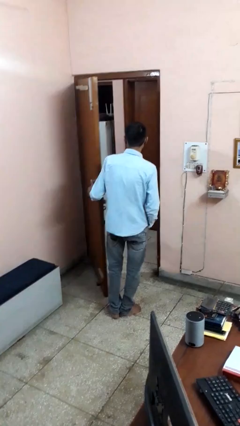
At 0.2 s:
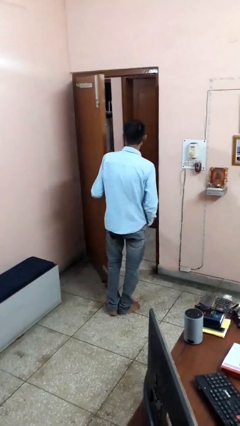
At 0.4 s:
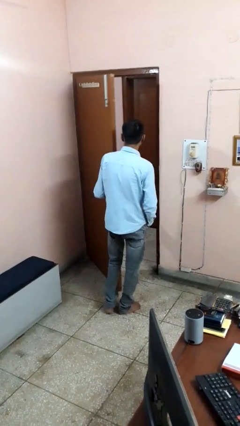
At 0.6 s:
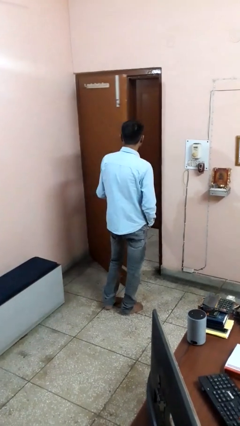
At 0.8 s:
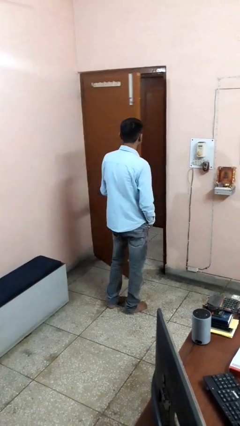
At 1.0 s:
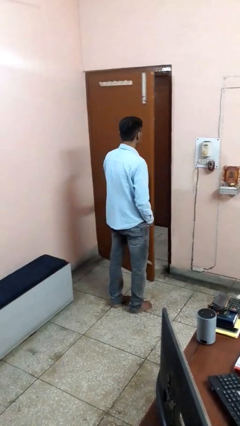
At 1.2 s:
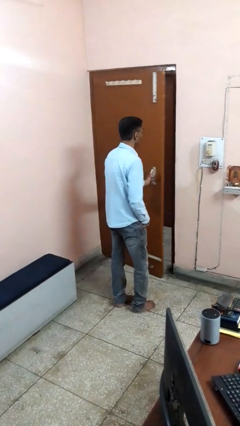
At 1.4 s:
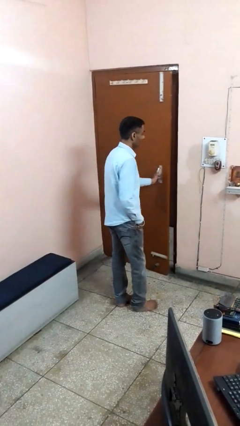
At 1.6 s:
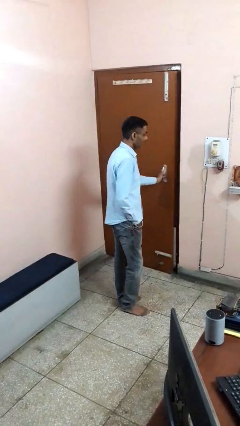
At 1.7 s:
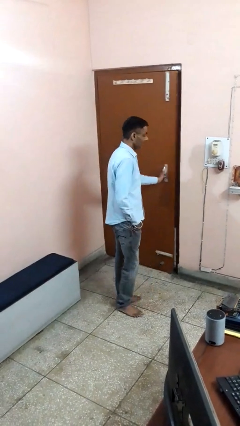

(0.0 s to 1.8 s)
person closes facility door

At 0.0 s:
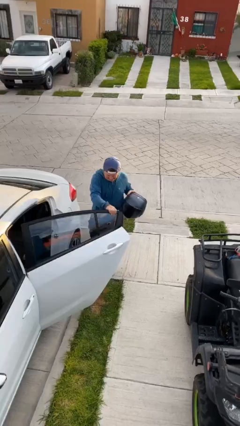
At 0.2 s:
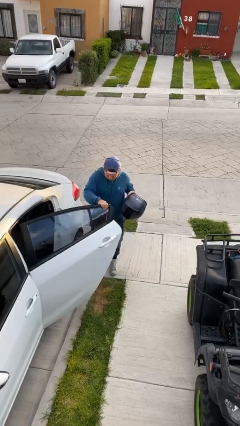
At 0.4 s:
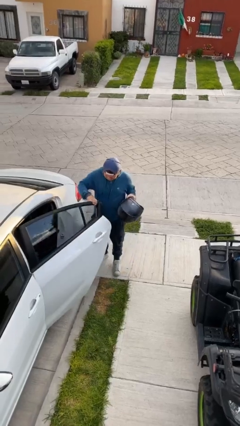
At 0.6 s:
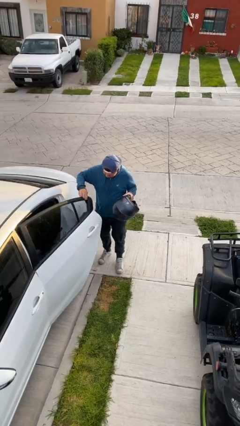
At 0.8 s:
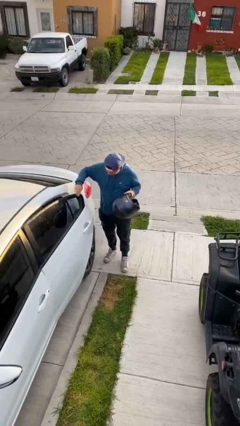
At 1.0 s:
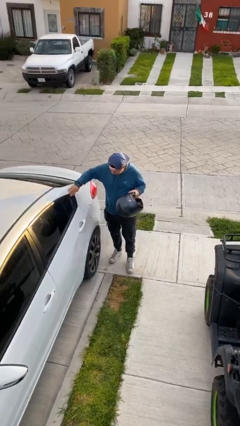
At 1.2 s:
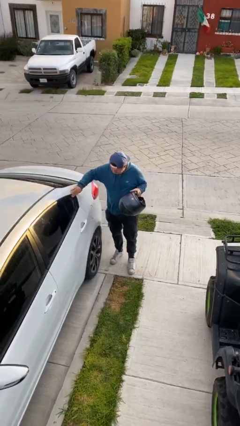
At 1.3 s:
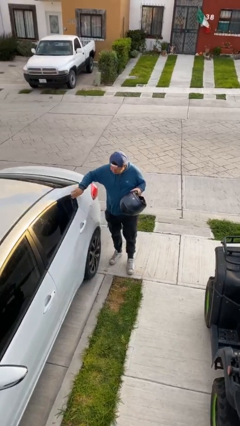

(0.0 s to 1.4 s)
person closes car door

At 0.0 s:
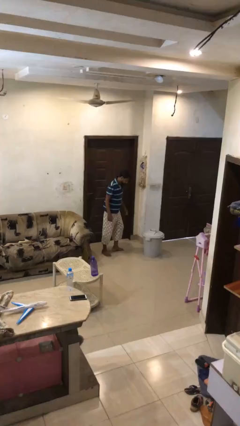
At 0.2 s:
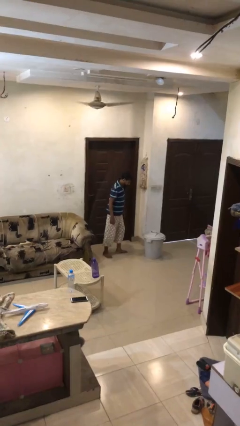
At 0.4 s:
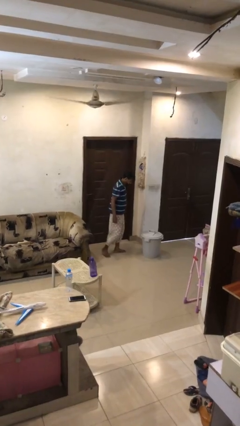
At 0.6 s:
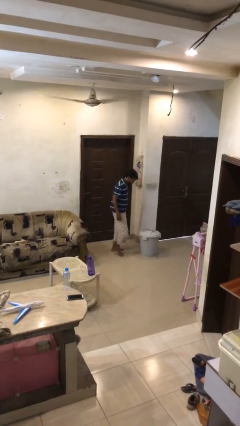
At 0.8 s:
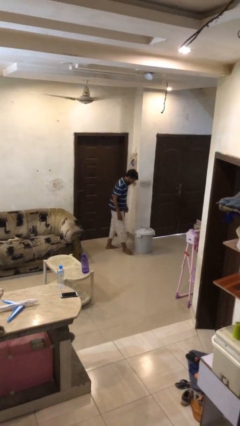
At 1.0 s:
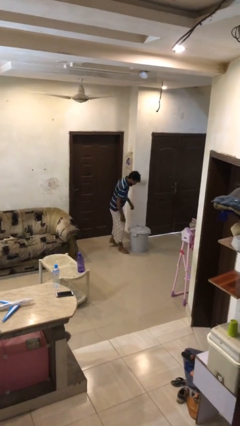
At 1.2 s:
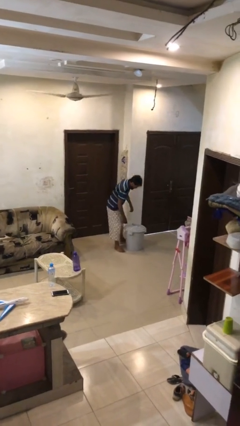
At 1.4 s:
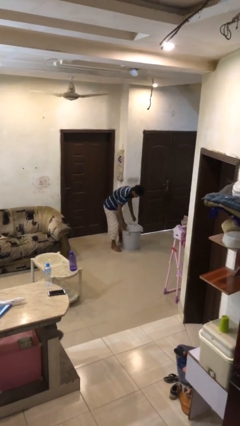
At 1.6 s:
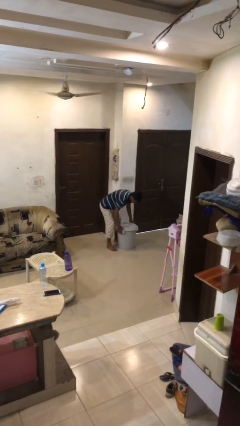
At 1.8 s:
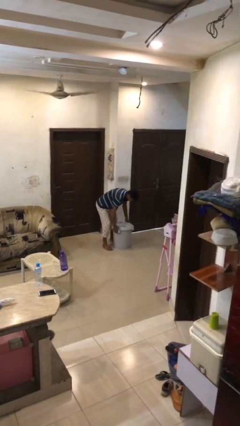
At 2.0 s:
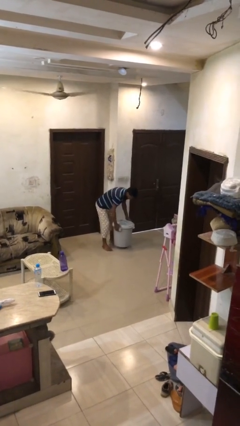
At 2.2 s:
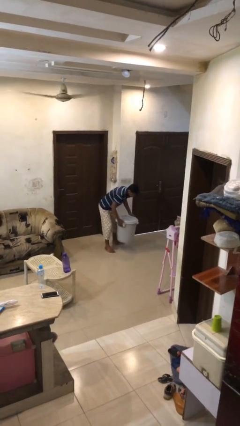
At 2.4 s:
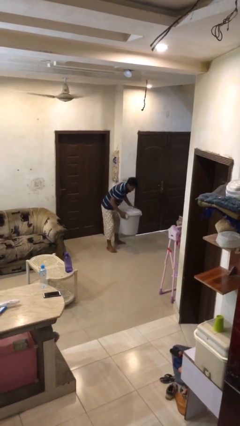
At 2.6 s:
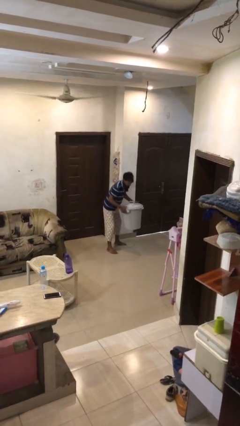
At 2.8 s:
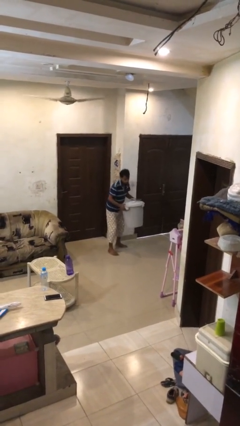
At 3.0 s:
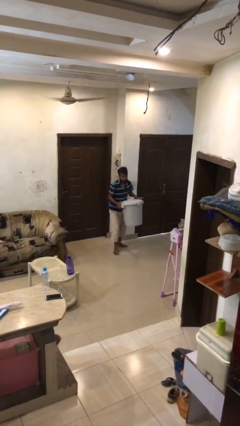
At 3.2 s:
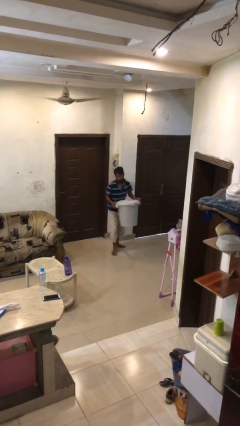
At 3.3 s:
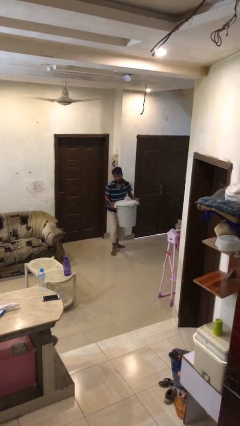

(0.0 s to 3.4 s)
person picks up object from floor

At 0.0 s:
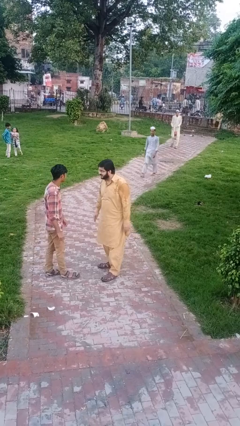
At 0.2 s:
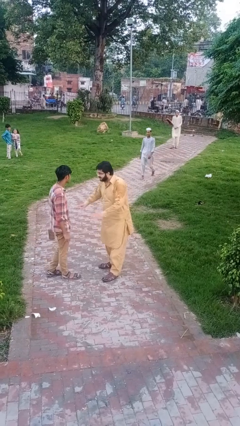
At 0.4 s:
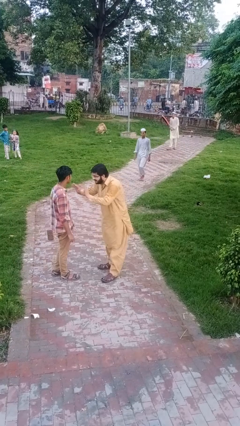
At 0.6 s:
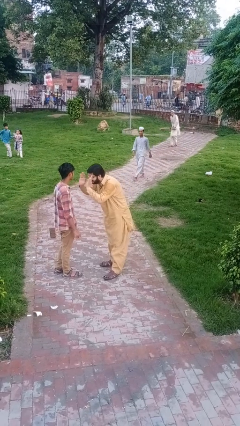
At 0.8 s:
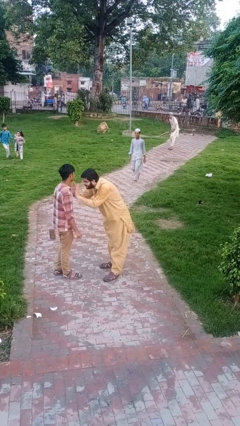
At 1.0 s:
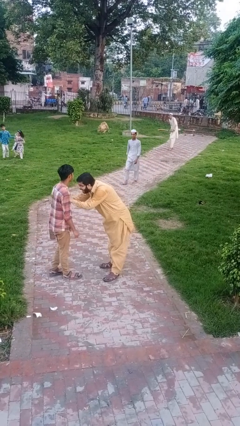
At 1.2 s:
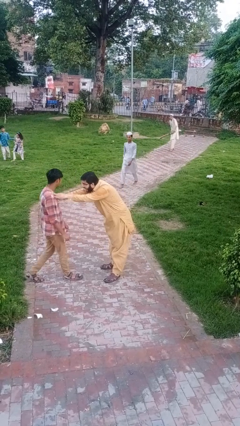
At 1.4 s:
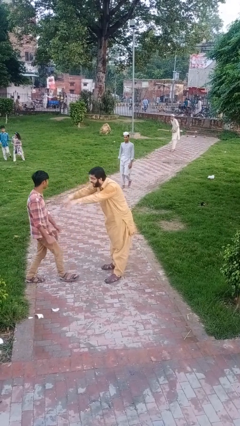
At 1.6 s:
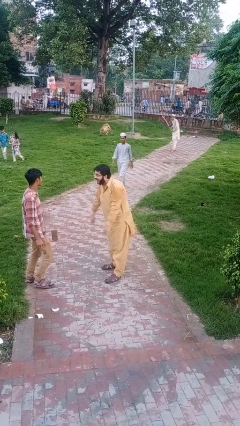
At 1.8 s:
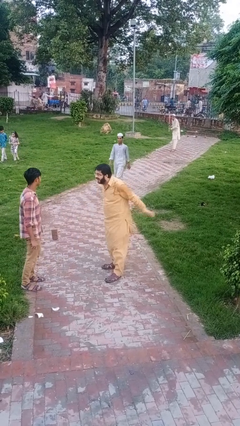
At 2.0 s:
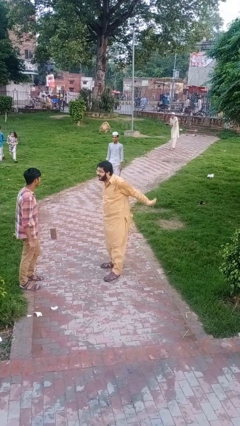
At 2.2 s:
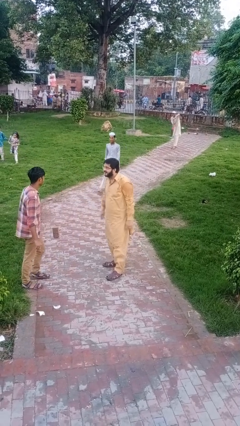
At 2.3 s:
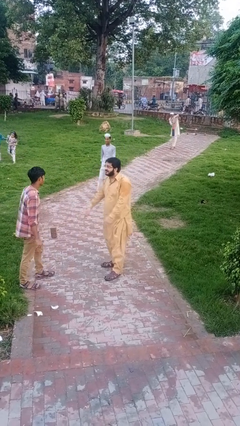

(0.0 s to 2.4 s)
person shoves person

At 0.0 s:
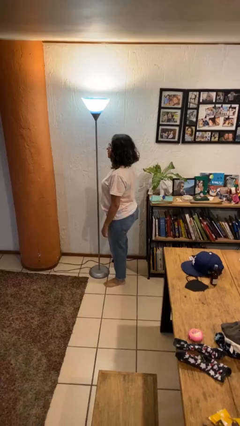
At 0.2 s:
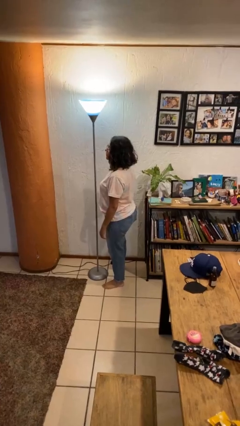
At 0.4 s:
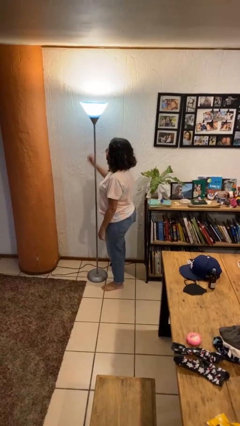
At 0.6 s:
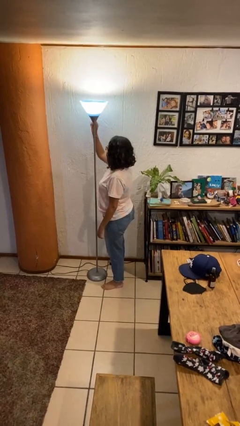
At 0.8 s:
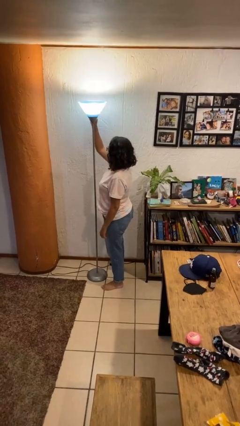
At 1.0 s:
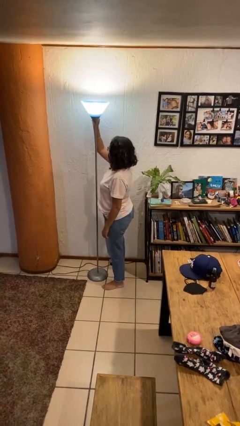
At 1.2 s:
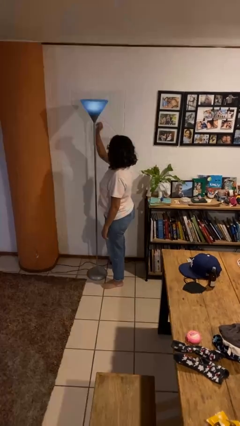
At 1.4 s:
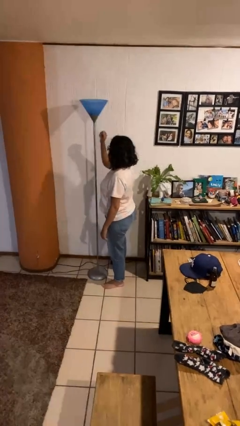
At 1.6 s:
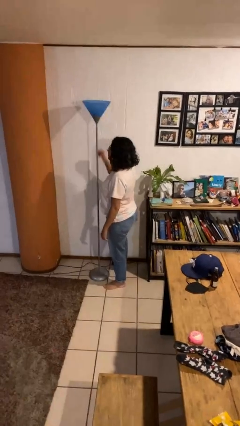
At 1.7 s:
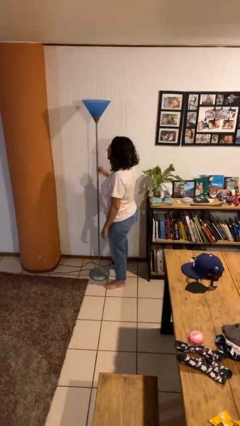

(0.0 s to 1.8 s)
person turns off lamp

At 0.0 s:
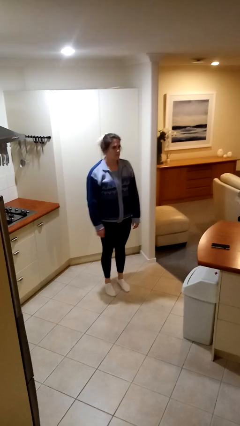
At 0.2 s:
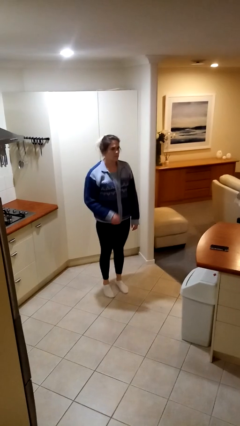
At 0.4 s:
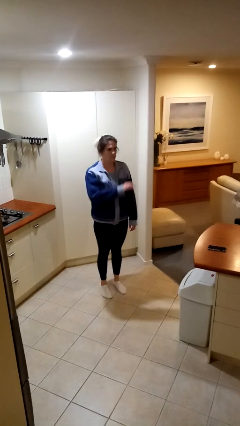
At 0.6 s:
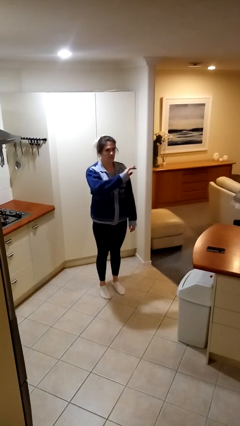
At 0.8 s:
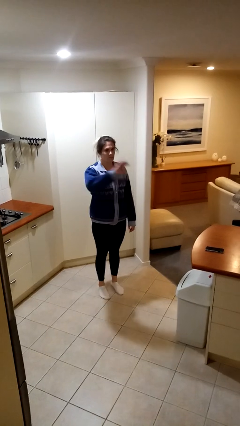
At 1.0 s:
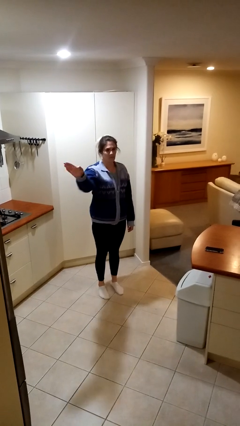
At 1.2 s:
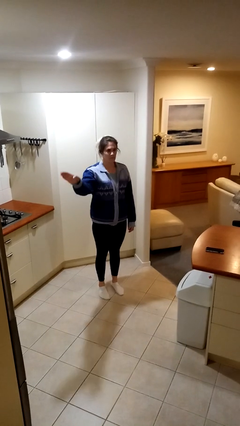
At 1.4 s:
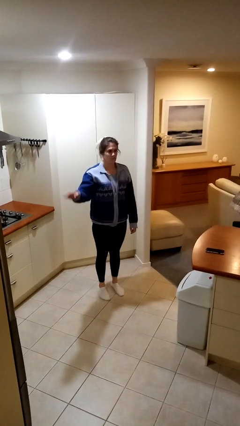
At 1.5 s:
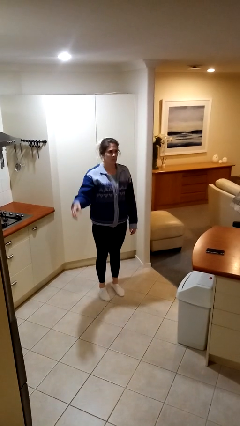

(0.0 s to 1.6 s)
person gestures swipe right

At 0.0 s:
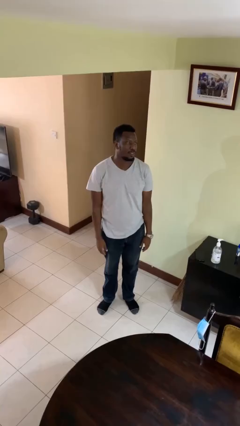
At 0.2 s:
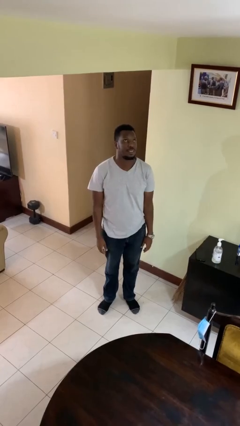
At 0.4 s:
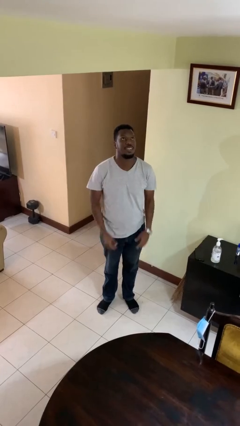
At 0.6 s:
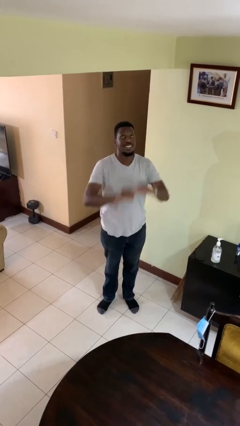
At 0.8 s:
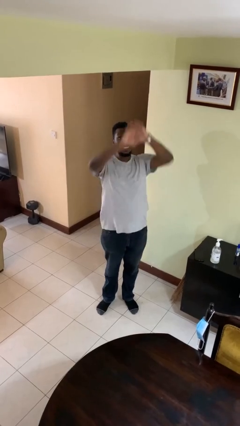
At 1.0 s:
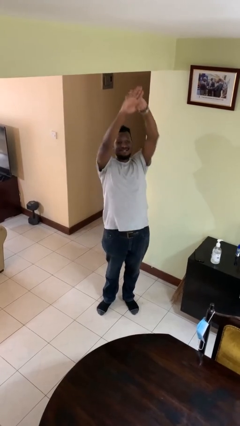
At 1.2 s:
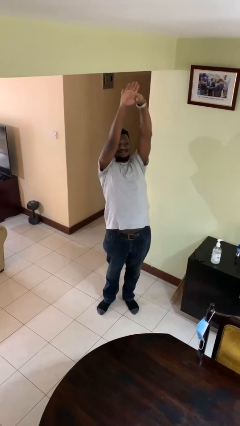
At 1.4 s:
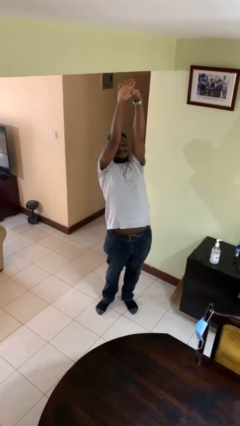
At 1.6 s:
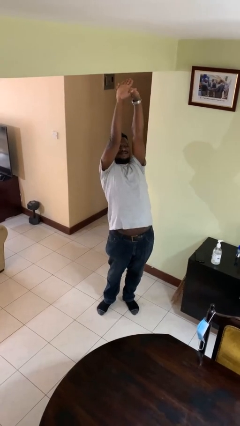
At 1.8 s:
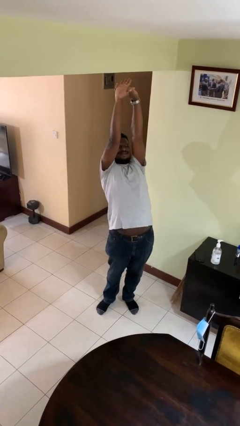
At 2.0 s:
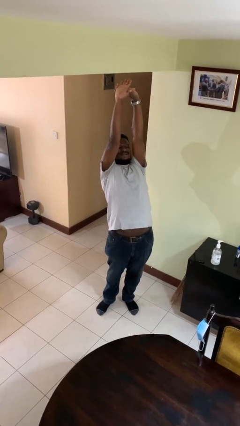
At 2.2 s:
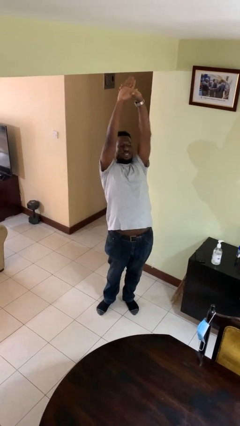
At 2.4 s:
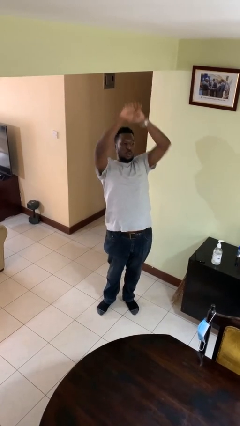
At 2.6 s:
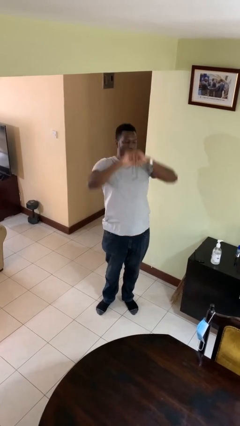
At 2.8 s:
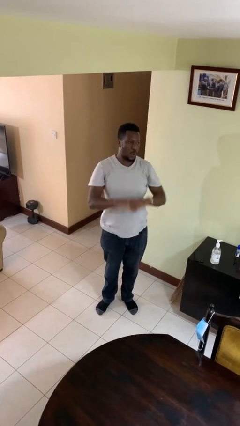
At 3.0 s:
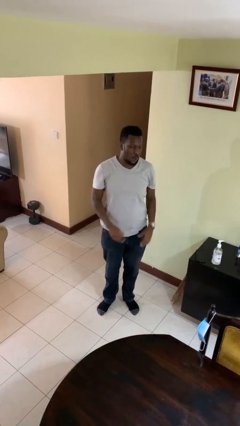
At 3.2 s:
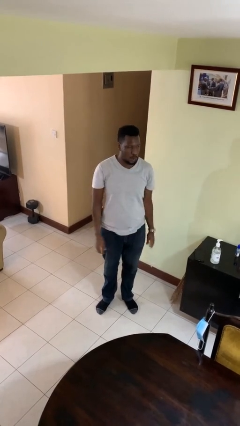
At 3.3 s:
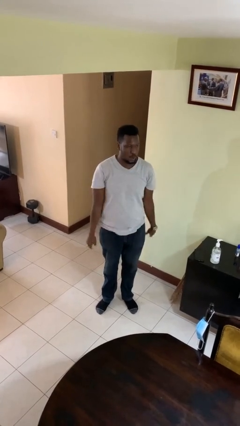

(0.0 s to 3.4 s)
person stretches arms over head

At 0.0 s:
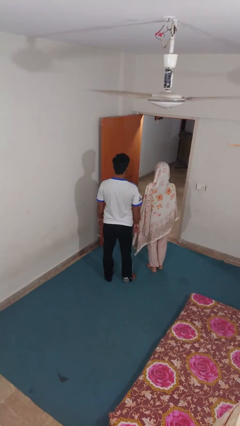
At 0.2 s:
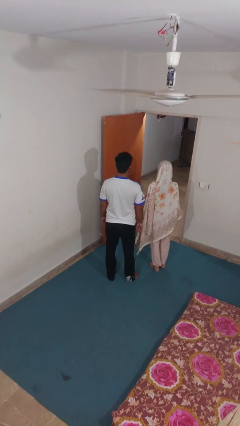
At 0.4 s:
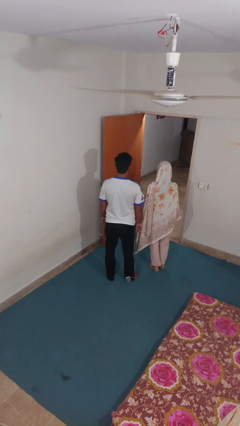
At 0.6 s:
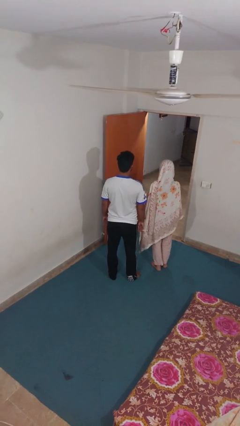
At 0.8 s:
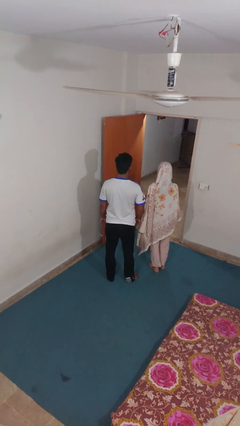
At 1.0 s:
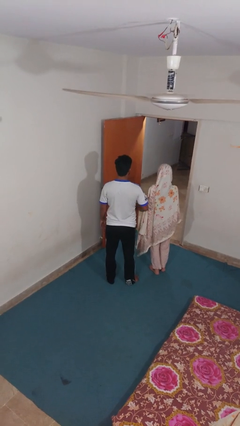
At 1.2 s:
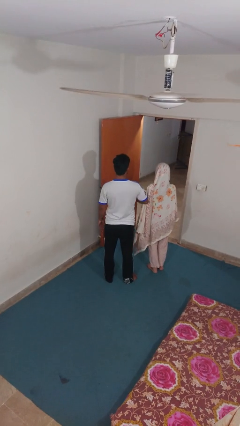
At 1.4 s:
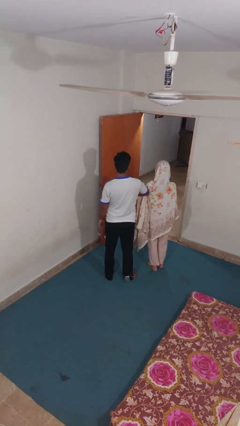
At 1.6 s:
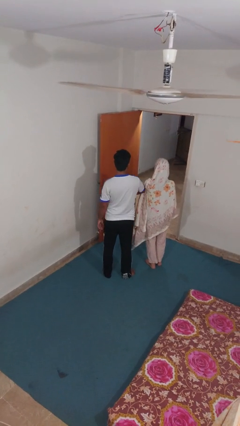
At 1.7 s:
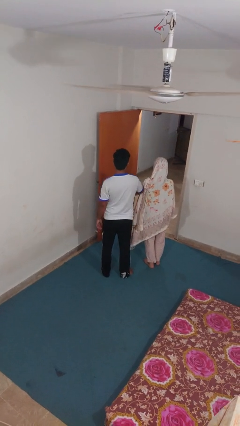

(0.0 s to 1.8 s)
person nudges person with elbow
